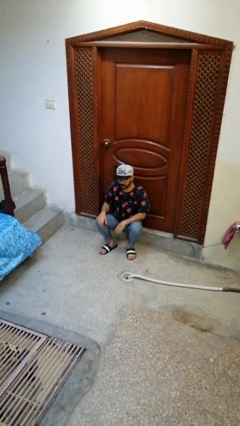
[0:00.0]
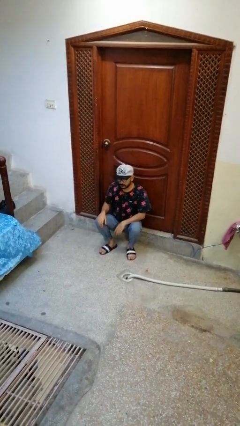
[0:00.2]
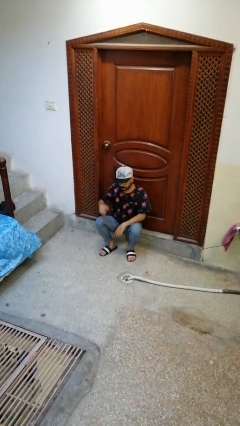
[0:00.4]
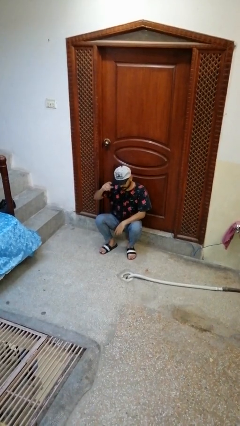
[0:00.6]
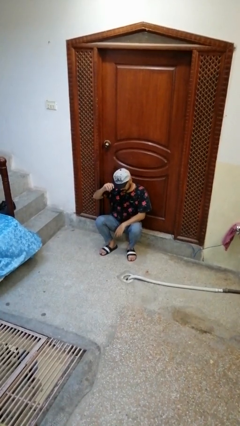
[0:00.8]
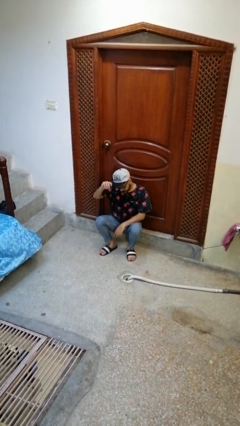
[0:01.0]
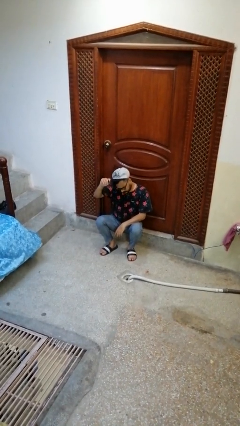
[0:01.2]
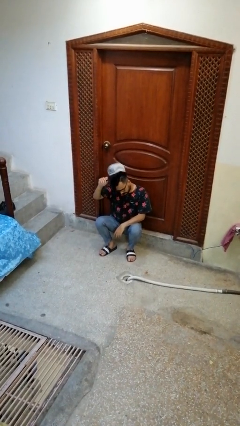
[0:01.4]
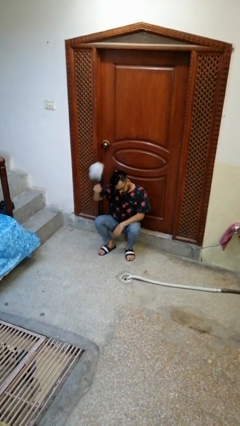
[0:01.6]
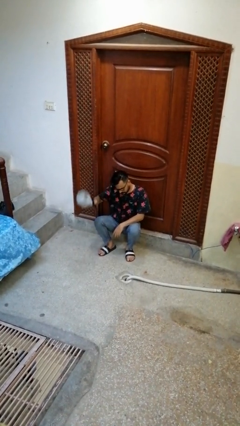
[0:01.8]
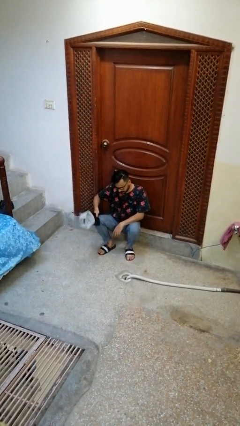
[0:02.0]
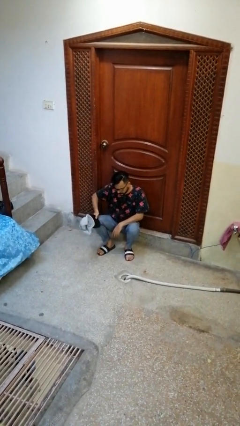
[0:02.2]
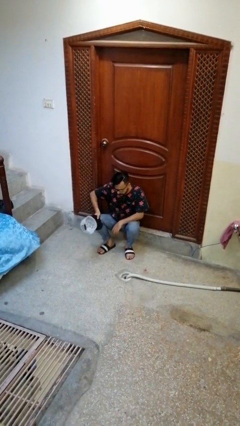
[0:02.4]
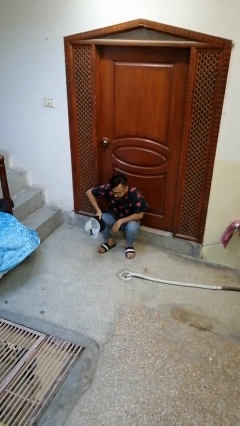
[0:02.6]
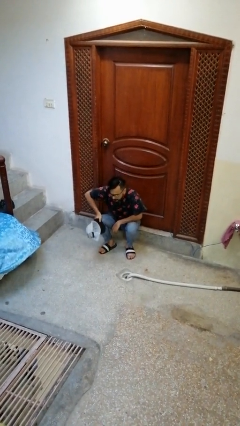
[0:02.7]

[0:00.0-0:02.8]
person takes off hat

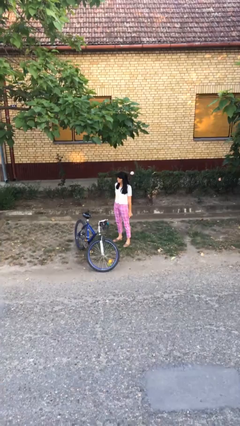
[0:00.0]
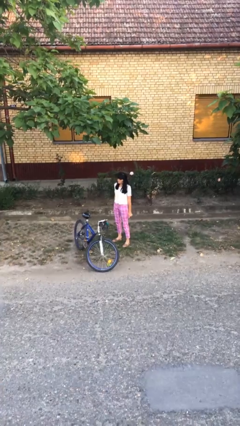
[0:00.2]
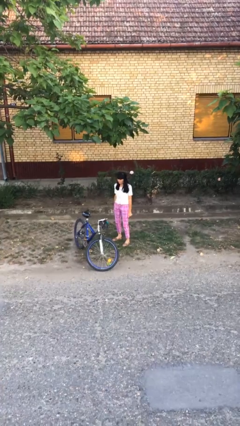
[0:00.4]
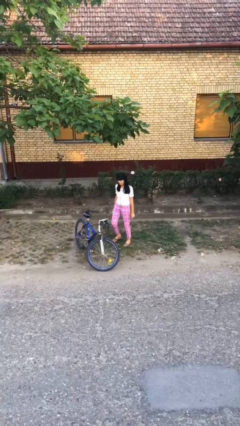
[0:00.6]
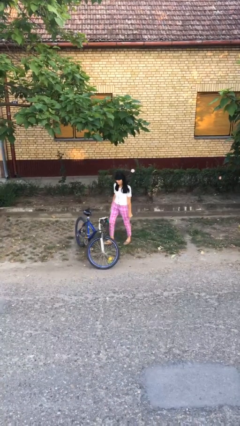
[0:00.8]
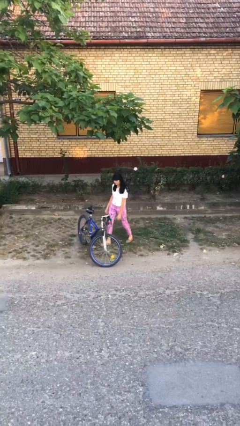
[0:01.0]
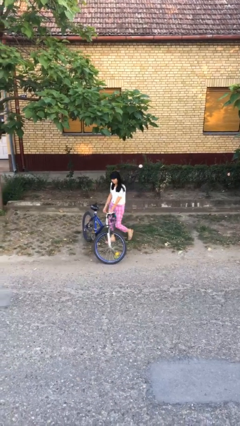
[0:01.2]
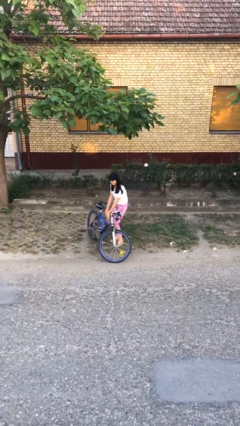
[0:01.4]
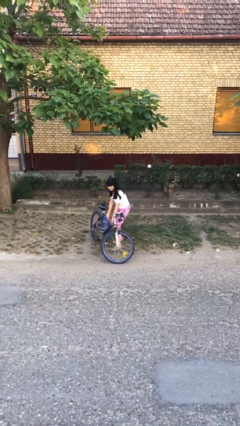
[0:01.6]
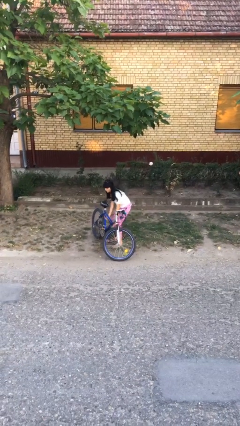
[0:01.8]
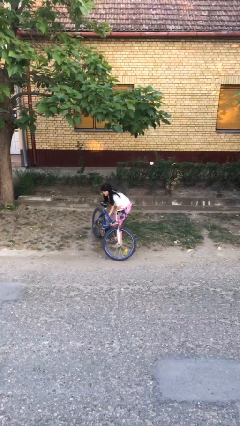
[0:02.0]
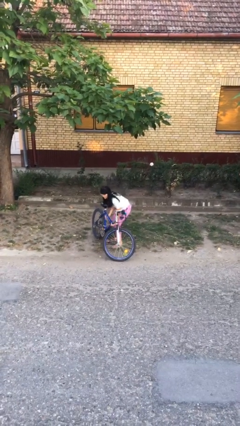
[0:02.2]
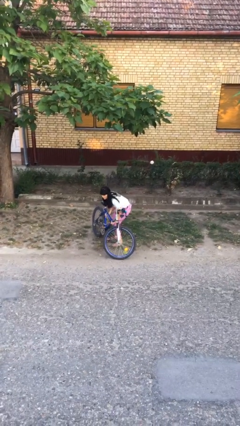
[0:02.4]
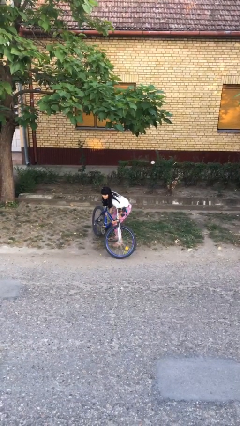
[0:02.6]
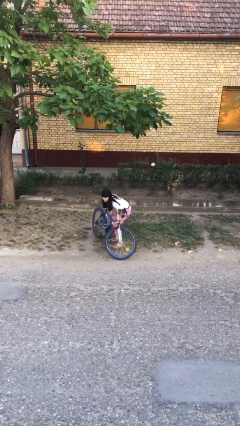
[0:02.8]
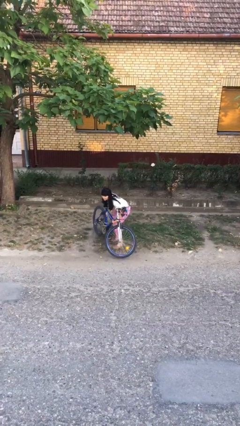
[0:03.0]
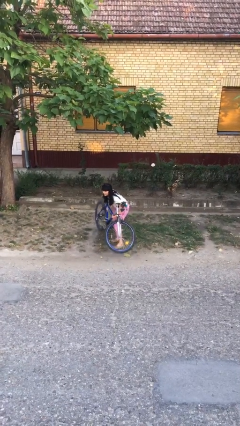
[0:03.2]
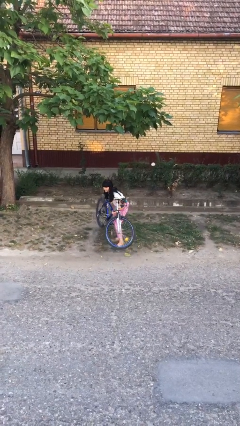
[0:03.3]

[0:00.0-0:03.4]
person picks up object from floor

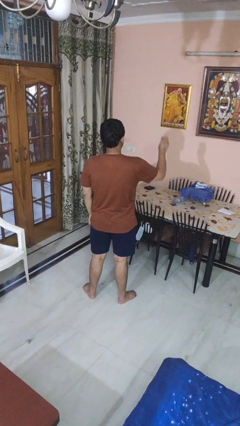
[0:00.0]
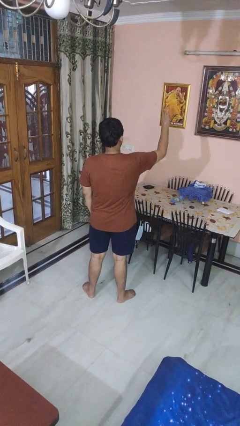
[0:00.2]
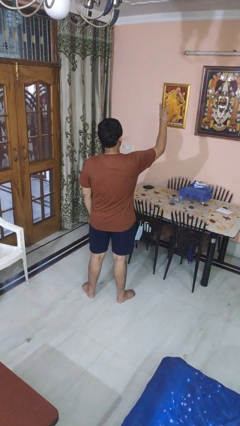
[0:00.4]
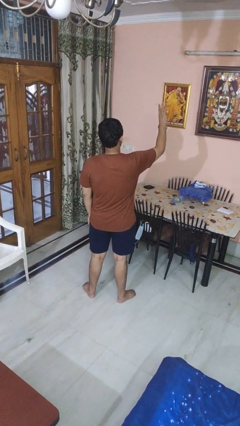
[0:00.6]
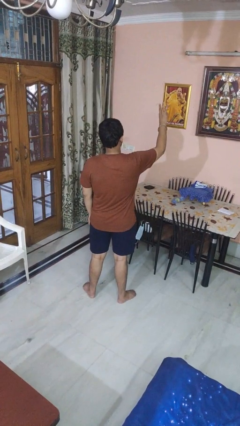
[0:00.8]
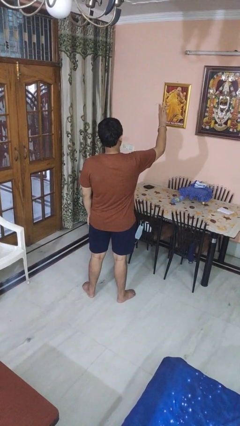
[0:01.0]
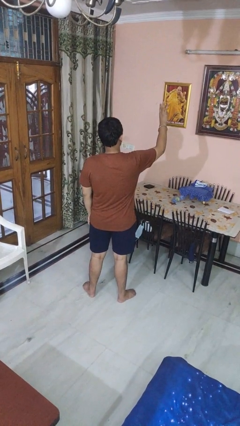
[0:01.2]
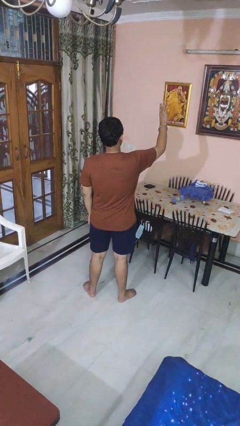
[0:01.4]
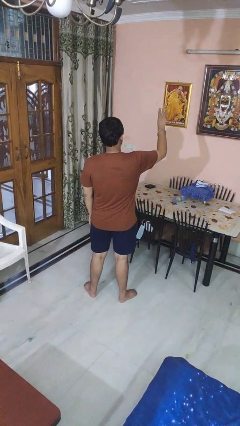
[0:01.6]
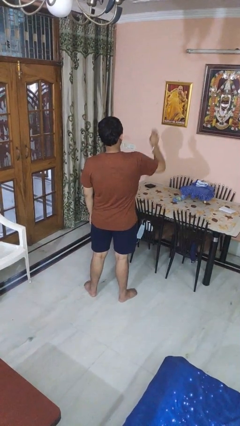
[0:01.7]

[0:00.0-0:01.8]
person gestures number three

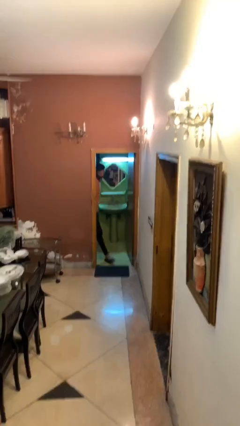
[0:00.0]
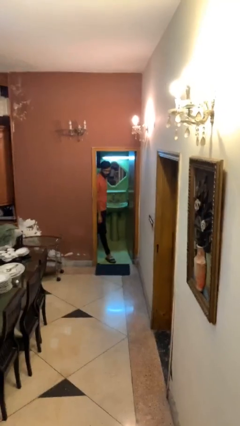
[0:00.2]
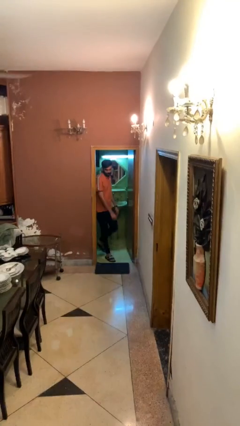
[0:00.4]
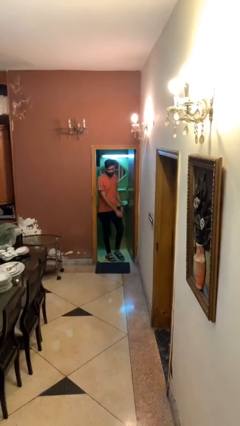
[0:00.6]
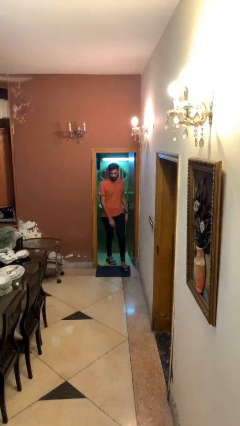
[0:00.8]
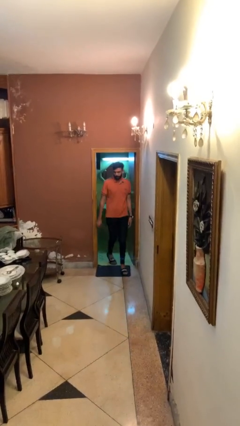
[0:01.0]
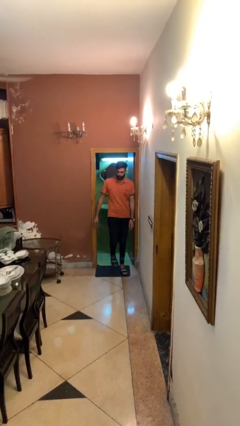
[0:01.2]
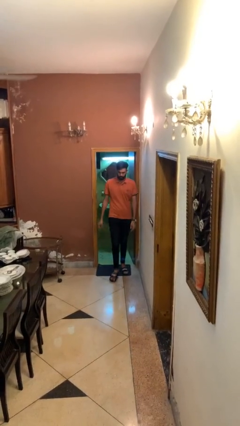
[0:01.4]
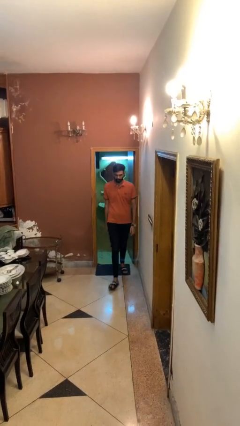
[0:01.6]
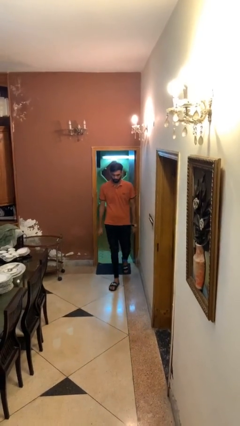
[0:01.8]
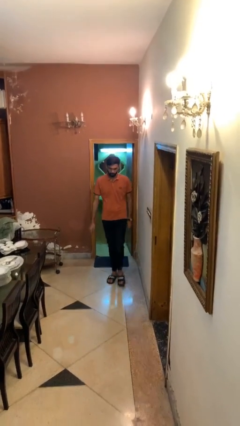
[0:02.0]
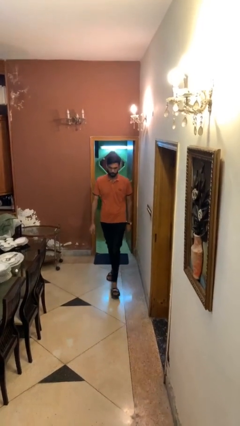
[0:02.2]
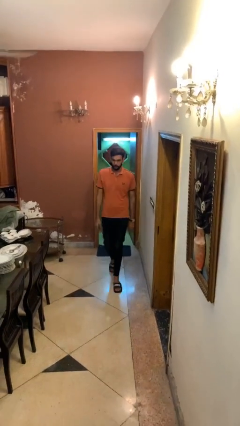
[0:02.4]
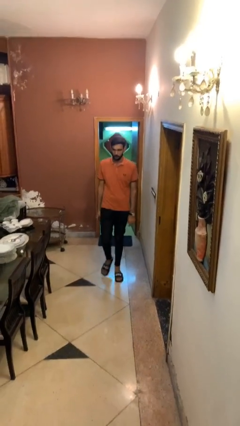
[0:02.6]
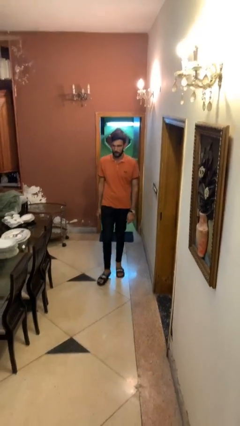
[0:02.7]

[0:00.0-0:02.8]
person enters scene through structure

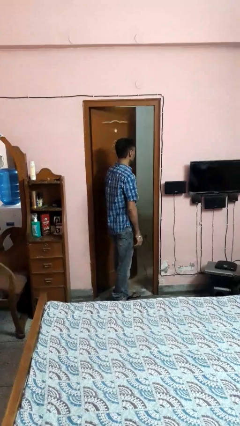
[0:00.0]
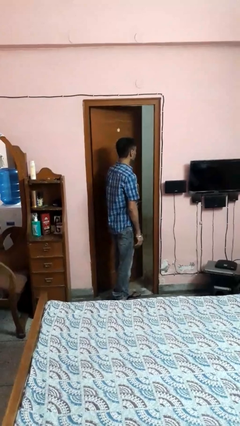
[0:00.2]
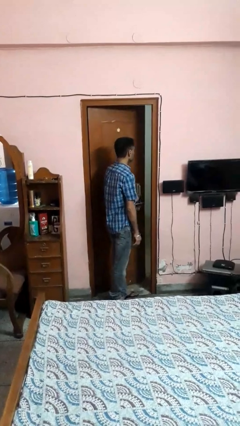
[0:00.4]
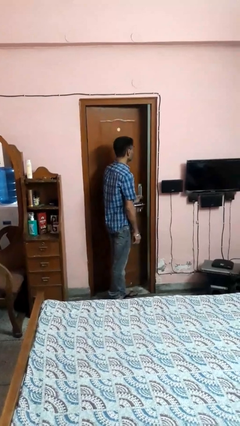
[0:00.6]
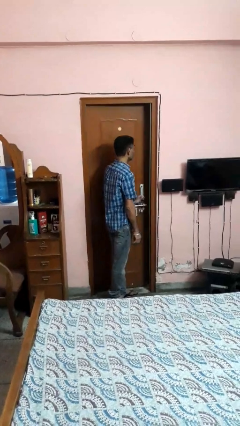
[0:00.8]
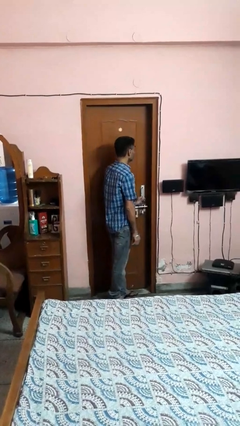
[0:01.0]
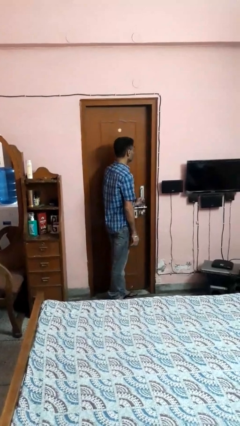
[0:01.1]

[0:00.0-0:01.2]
person closes facility door

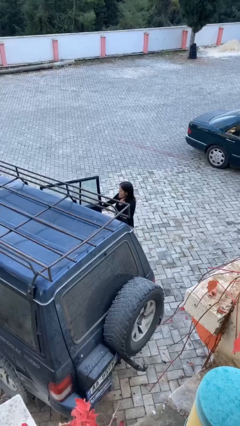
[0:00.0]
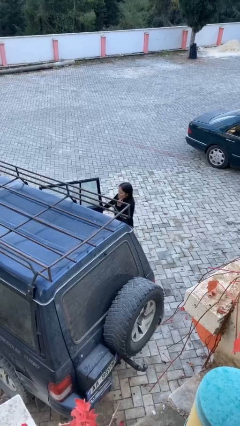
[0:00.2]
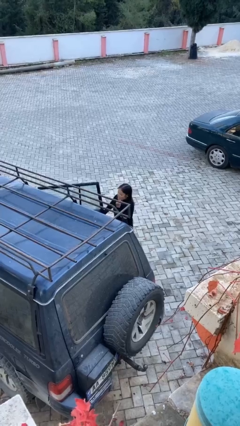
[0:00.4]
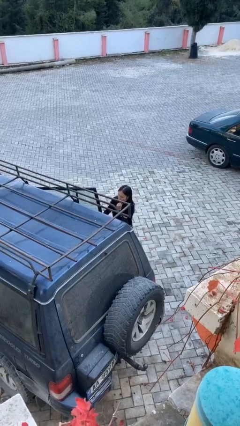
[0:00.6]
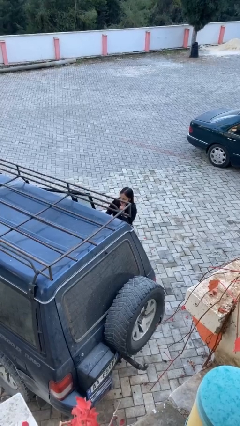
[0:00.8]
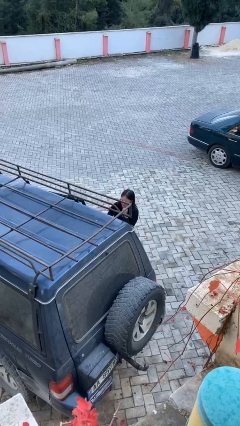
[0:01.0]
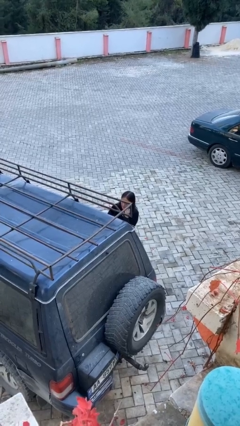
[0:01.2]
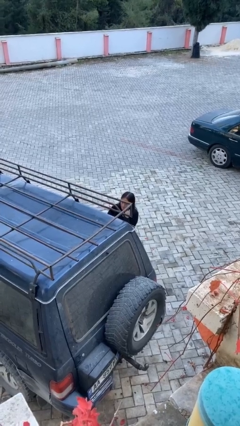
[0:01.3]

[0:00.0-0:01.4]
person closes car door

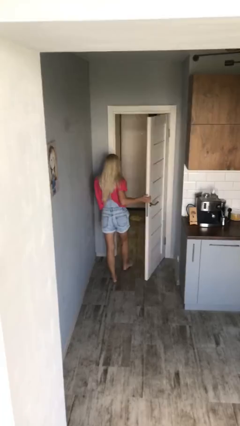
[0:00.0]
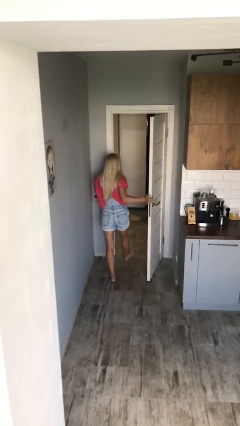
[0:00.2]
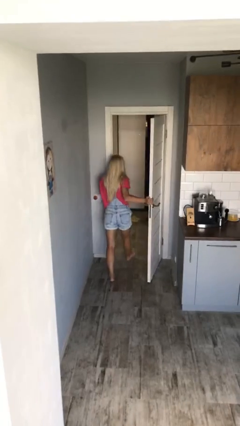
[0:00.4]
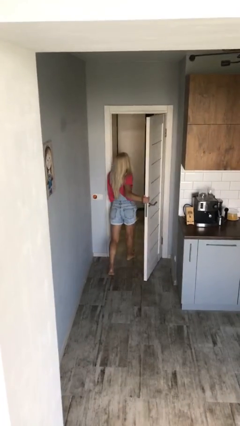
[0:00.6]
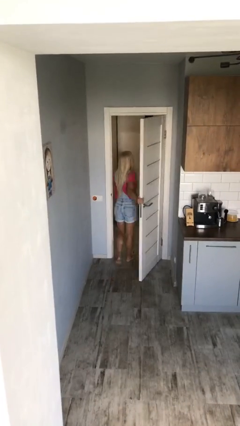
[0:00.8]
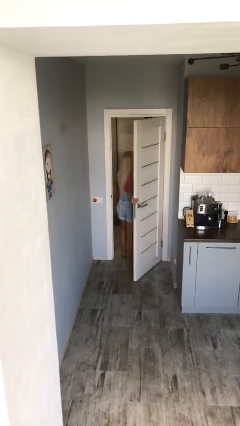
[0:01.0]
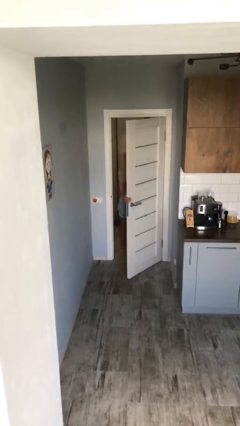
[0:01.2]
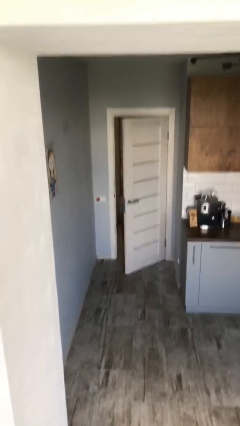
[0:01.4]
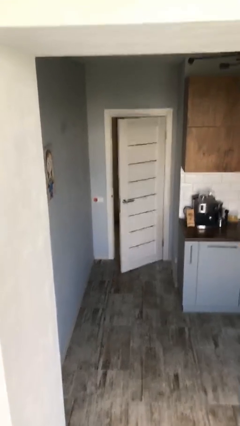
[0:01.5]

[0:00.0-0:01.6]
person exits scene through structure

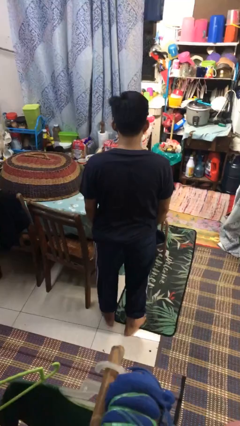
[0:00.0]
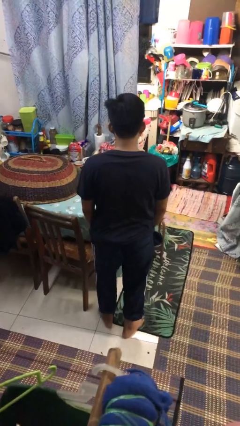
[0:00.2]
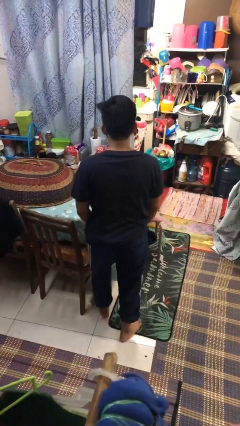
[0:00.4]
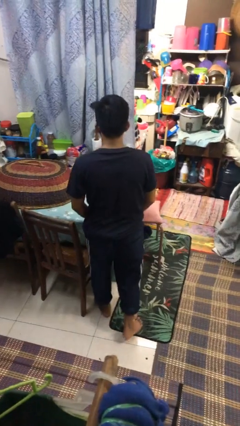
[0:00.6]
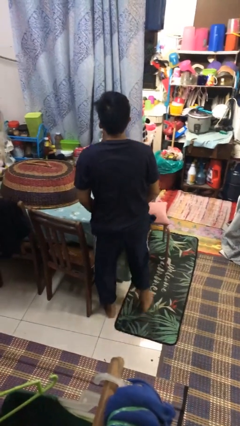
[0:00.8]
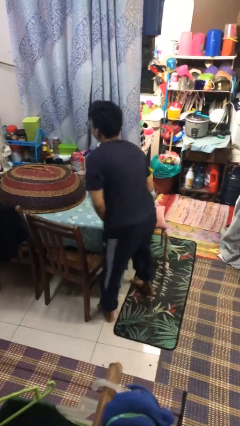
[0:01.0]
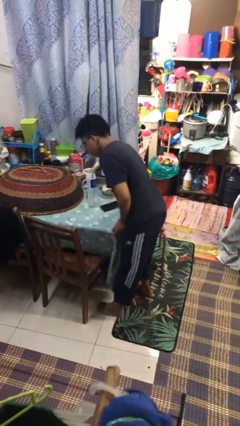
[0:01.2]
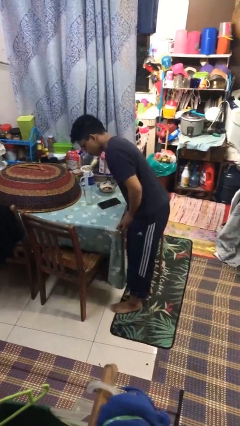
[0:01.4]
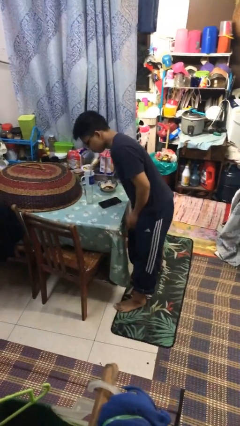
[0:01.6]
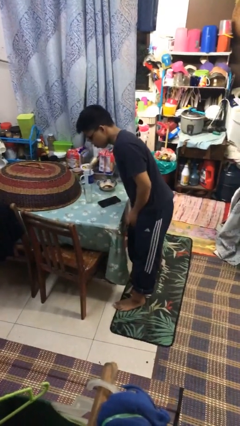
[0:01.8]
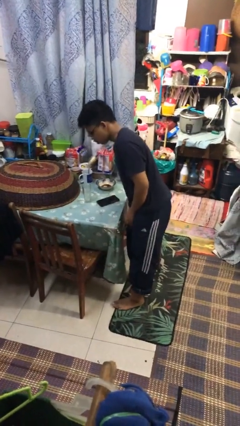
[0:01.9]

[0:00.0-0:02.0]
person bumps into table
